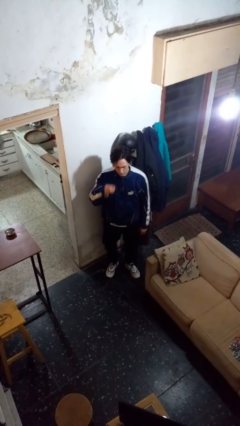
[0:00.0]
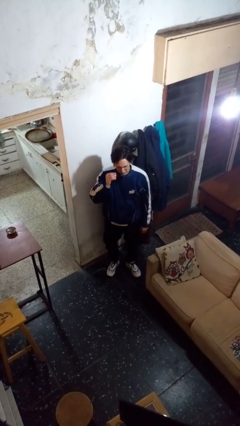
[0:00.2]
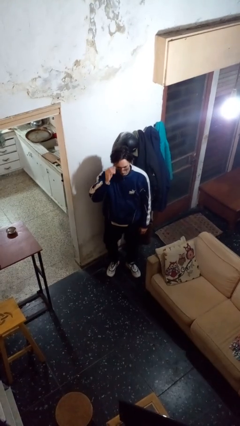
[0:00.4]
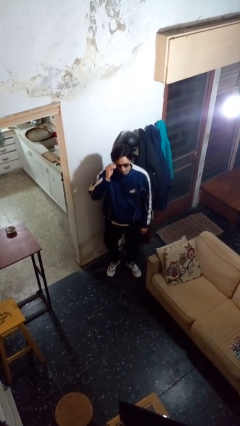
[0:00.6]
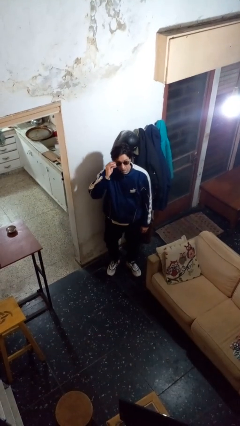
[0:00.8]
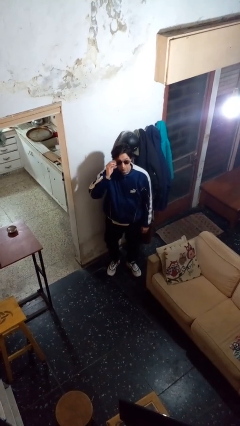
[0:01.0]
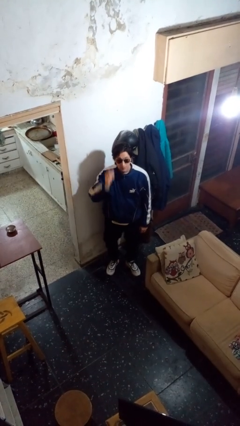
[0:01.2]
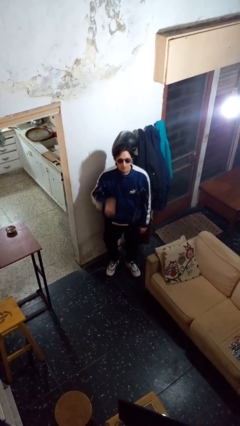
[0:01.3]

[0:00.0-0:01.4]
person puts on sunglasses

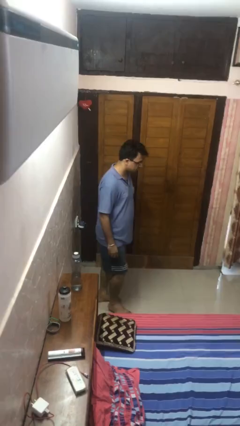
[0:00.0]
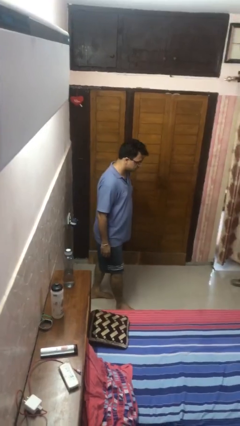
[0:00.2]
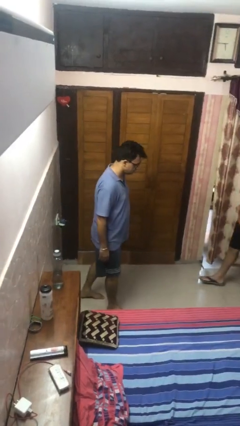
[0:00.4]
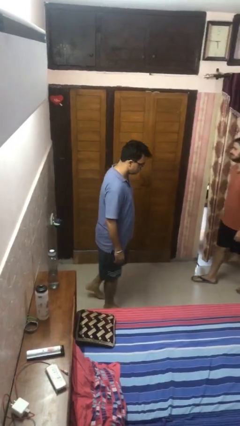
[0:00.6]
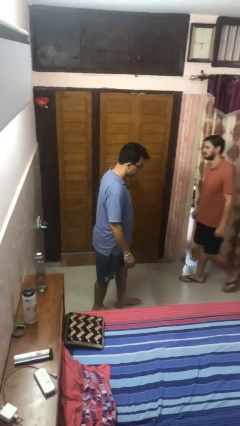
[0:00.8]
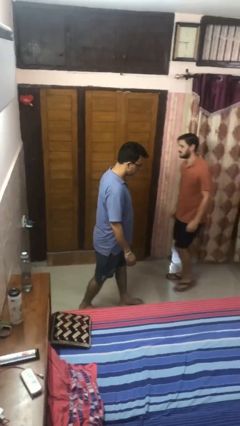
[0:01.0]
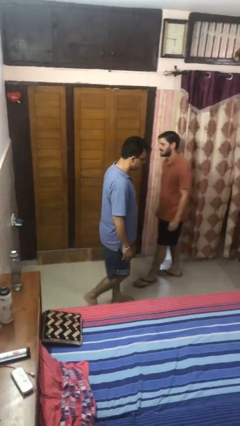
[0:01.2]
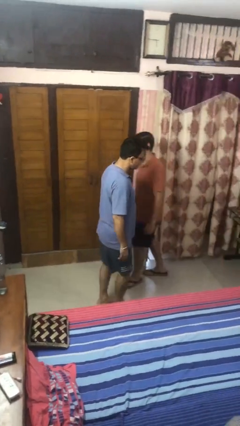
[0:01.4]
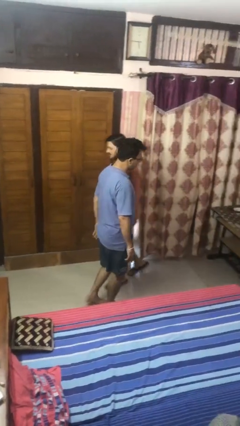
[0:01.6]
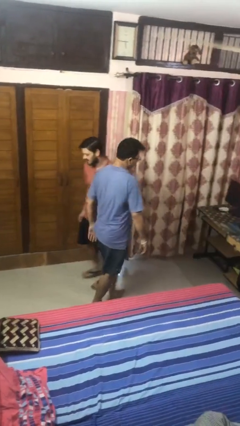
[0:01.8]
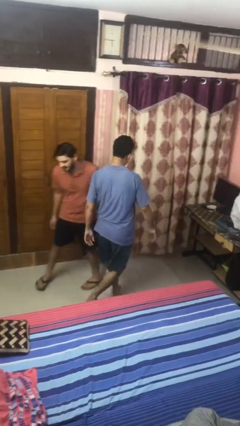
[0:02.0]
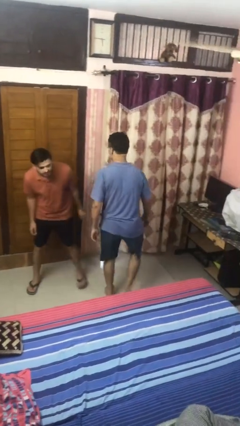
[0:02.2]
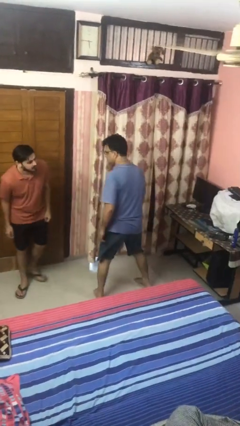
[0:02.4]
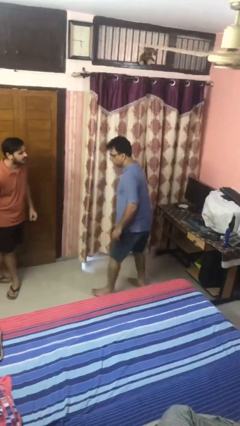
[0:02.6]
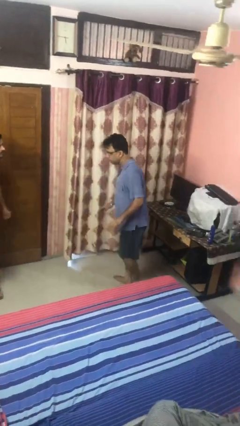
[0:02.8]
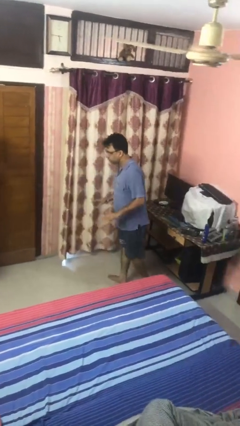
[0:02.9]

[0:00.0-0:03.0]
person bumps into person

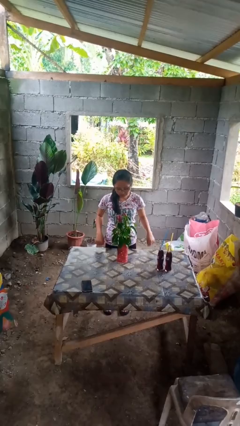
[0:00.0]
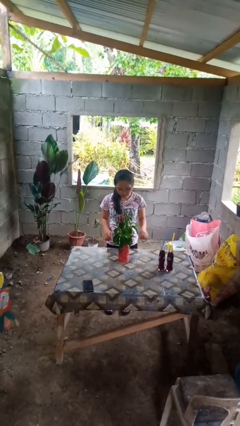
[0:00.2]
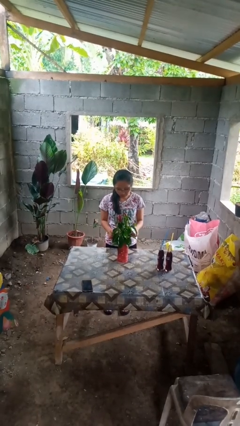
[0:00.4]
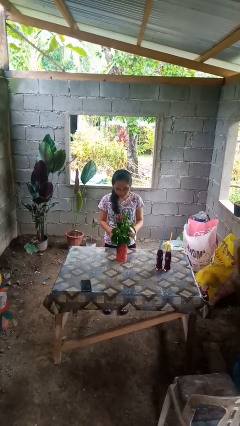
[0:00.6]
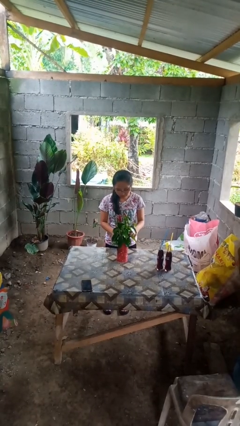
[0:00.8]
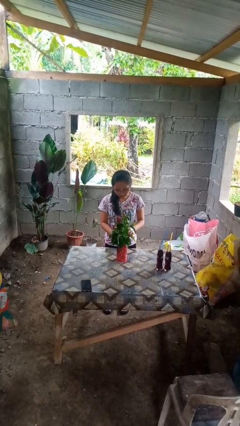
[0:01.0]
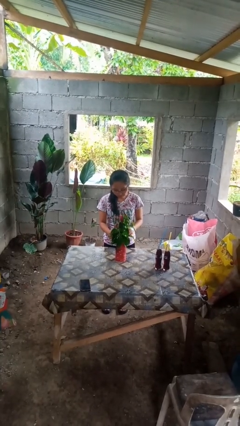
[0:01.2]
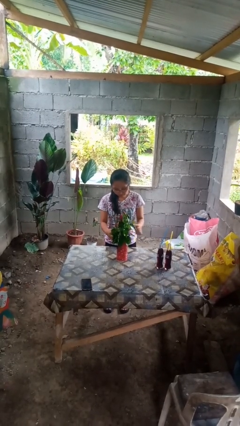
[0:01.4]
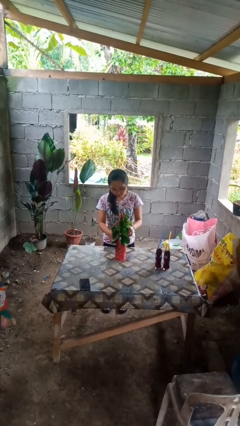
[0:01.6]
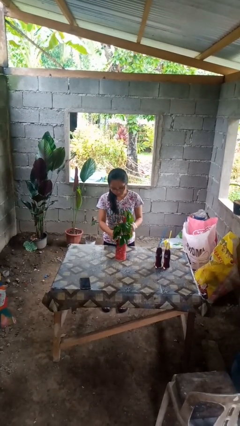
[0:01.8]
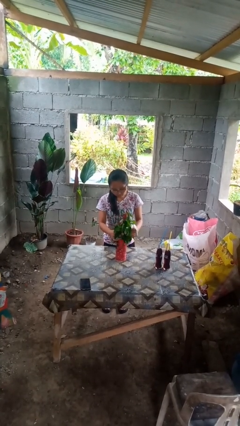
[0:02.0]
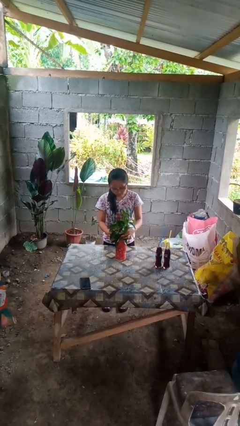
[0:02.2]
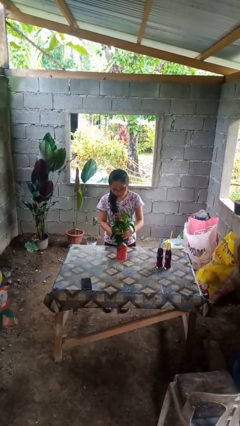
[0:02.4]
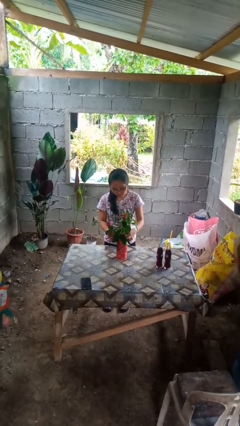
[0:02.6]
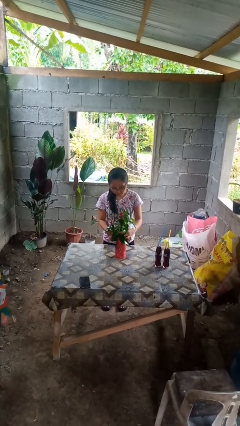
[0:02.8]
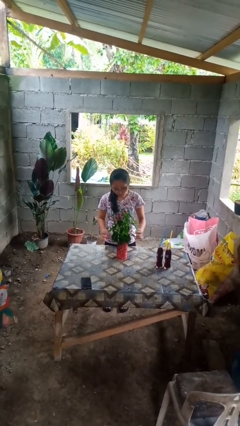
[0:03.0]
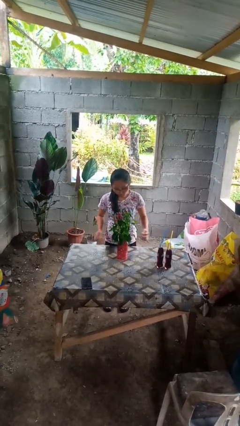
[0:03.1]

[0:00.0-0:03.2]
person arranges flowers in vase

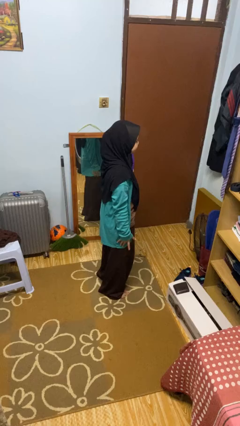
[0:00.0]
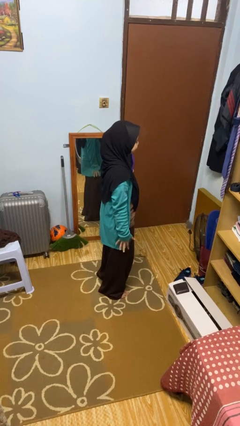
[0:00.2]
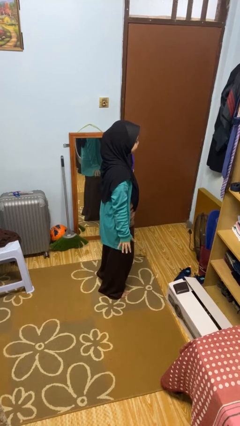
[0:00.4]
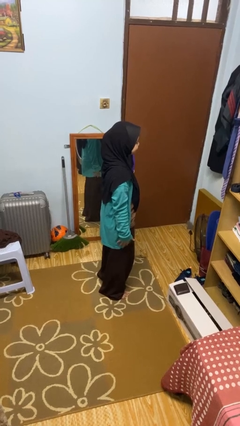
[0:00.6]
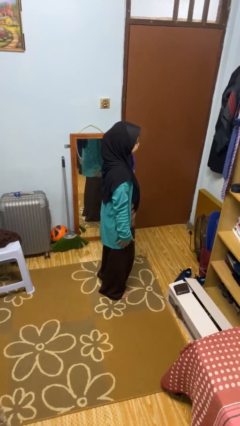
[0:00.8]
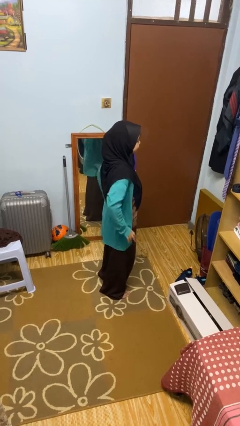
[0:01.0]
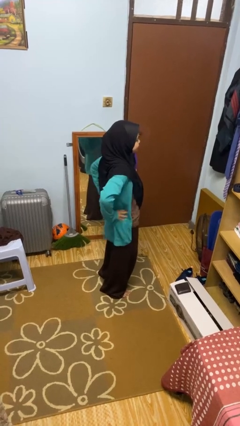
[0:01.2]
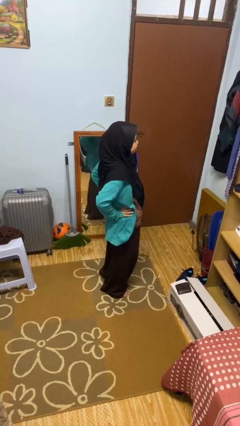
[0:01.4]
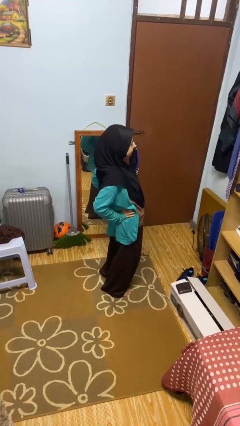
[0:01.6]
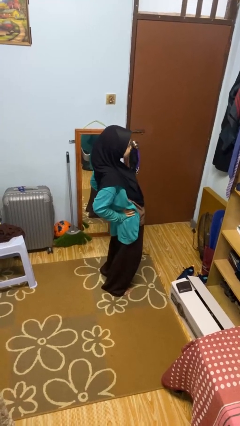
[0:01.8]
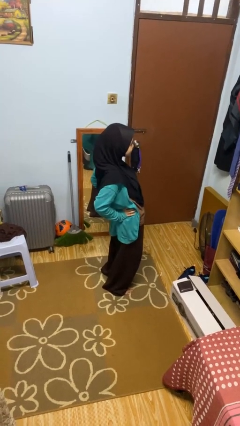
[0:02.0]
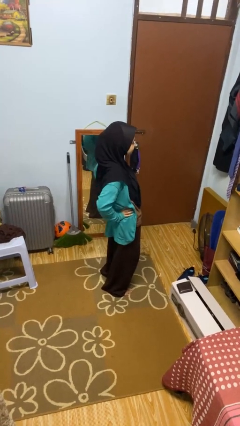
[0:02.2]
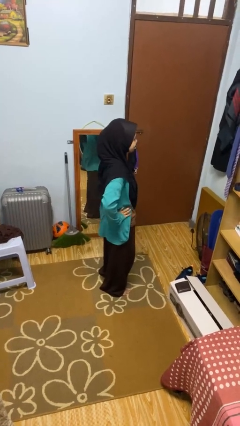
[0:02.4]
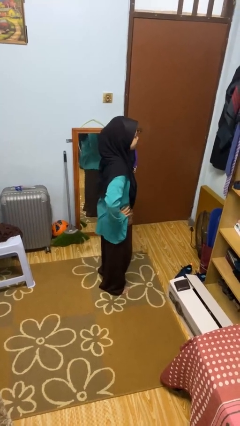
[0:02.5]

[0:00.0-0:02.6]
person stretches back

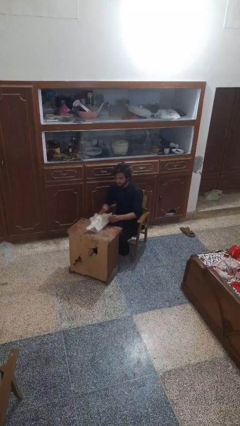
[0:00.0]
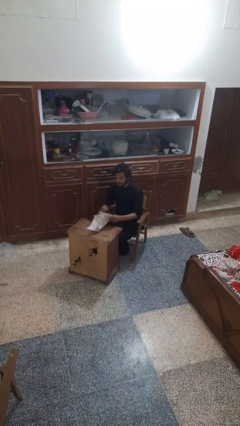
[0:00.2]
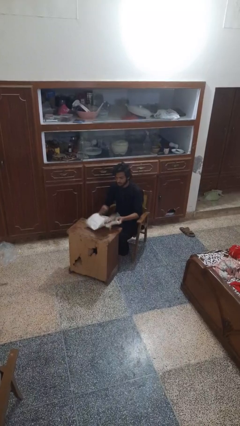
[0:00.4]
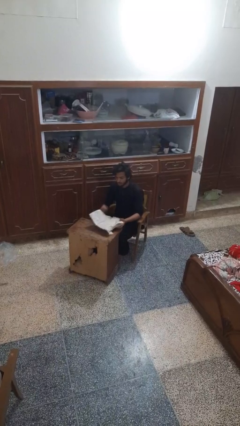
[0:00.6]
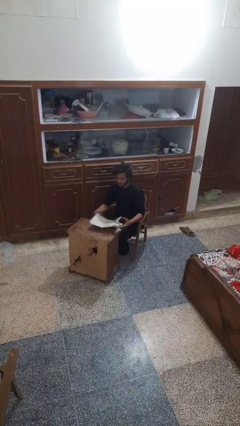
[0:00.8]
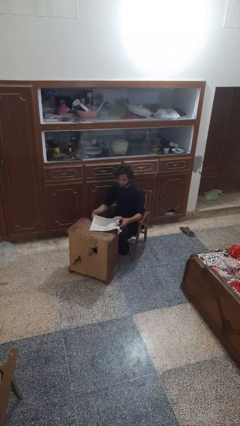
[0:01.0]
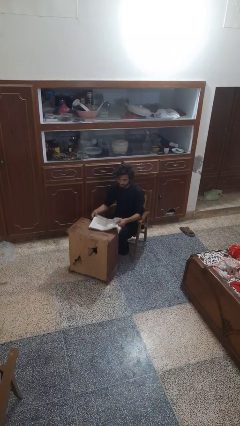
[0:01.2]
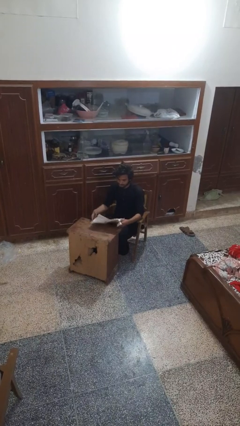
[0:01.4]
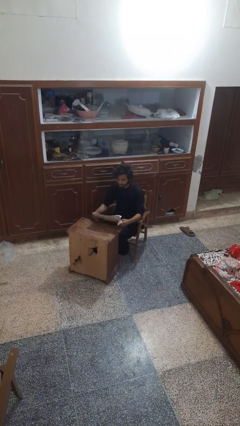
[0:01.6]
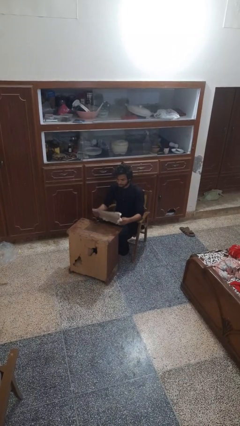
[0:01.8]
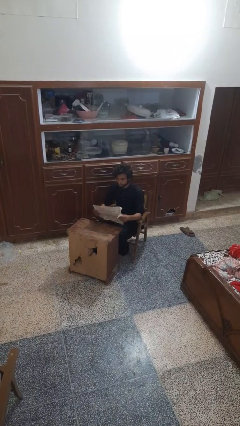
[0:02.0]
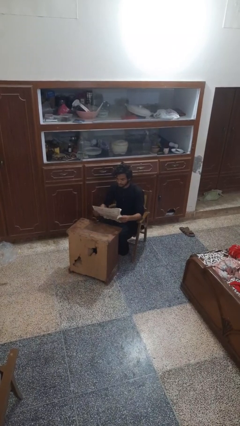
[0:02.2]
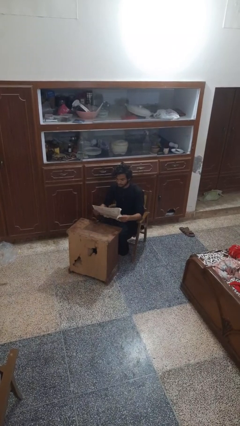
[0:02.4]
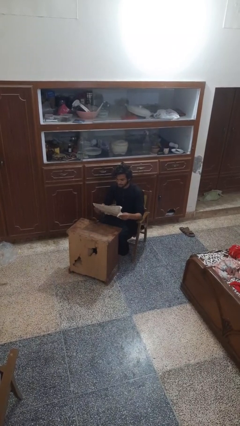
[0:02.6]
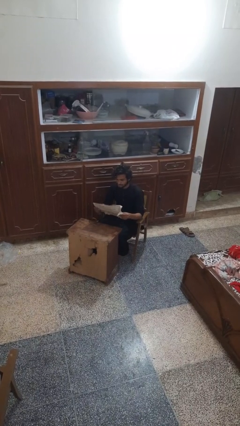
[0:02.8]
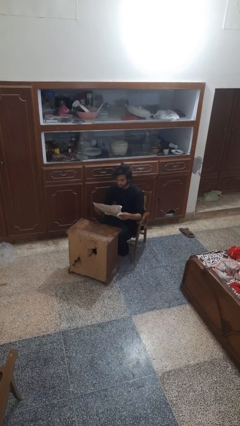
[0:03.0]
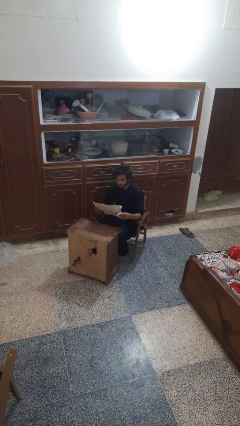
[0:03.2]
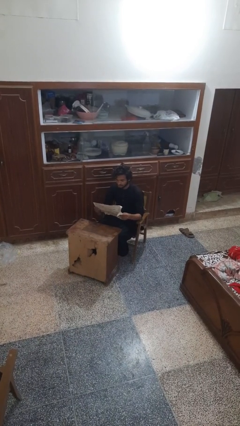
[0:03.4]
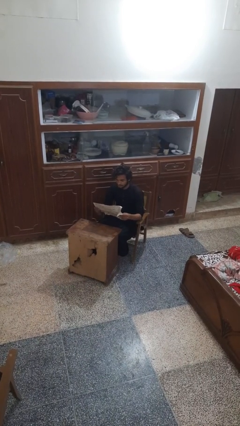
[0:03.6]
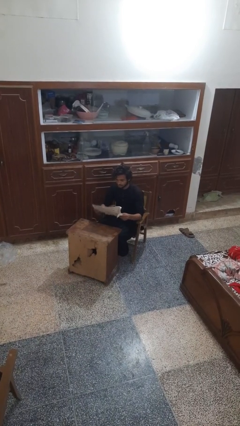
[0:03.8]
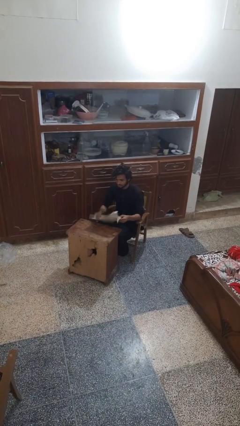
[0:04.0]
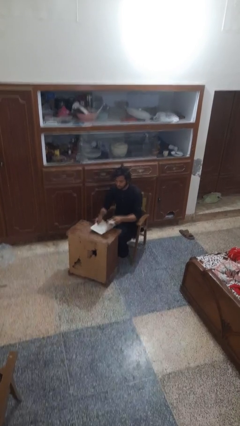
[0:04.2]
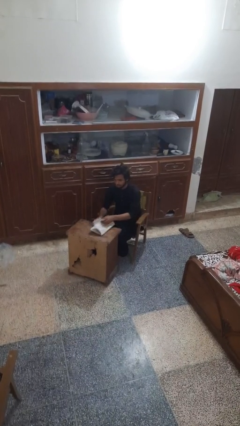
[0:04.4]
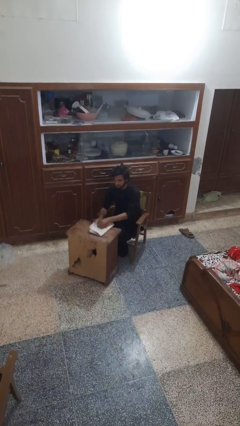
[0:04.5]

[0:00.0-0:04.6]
person reads newspaper

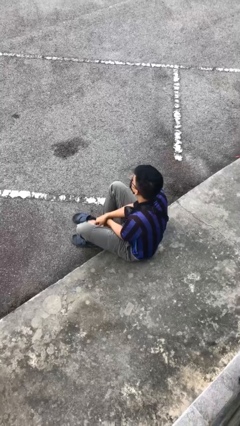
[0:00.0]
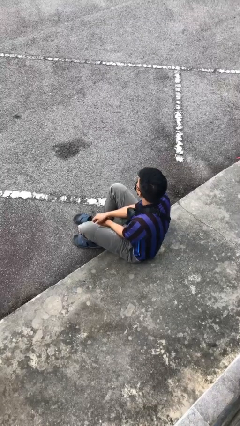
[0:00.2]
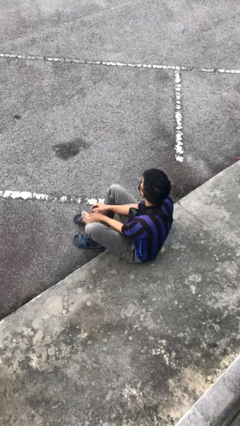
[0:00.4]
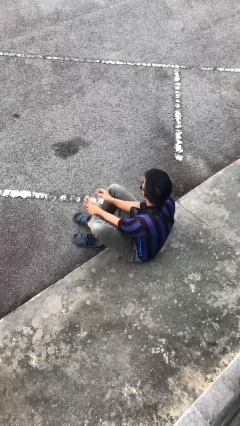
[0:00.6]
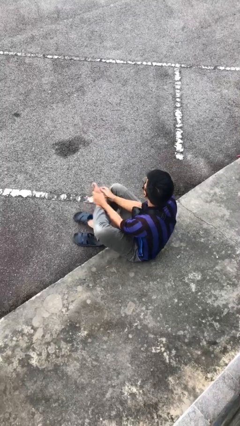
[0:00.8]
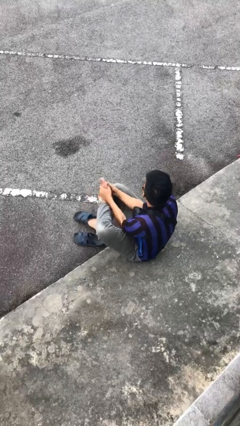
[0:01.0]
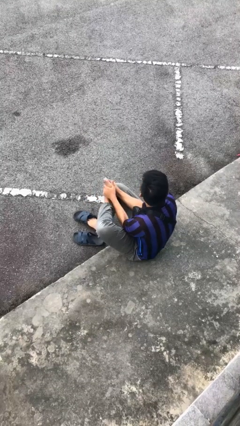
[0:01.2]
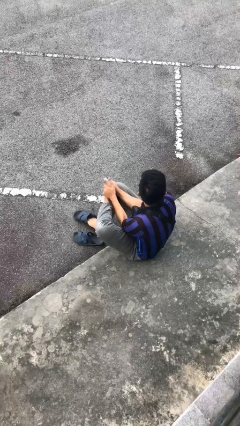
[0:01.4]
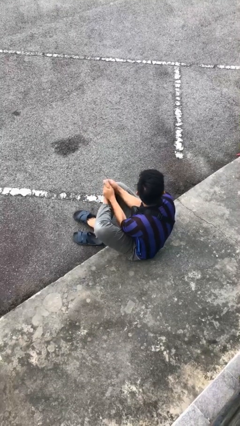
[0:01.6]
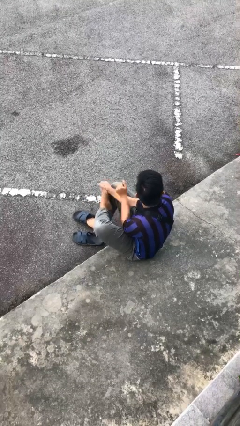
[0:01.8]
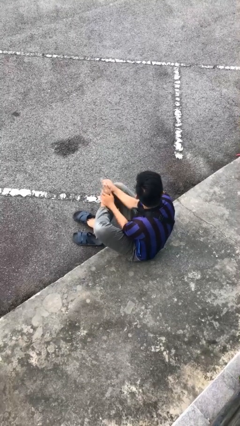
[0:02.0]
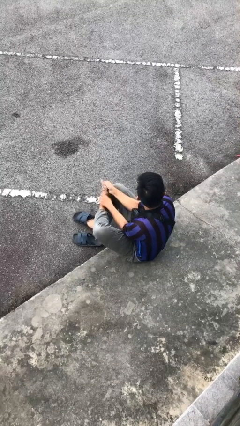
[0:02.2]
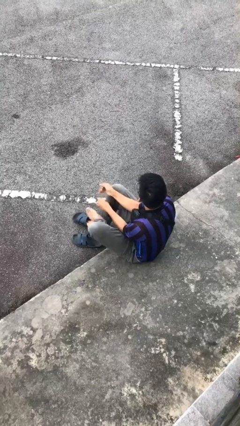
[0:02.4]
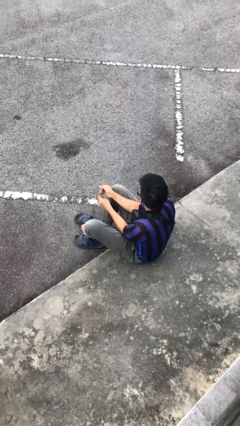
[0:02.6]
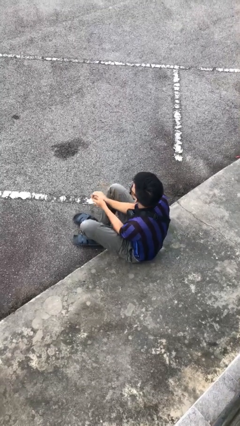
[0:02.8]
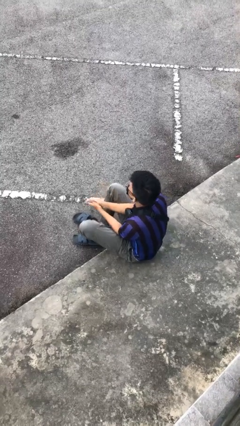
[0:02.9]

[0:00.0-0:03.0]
person rubs foot
